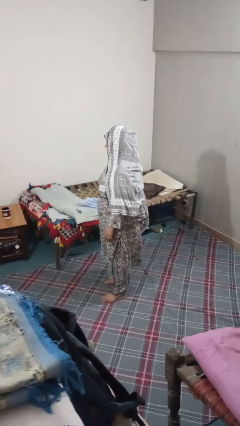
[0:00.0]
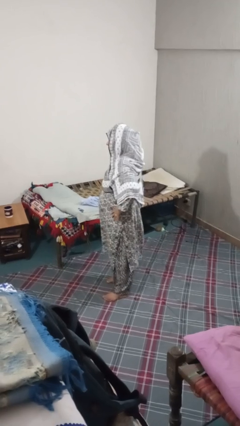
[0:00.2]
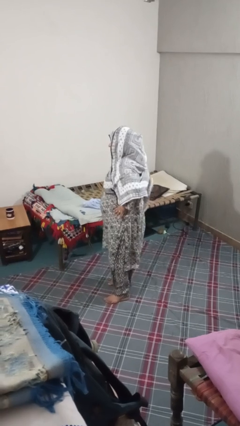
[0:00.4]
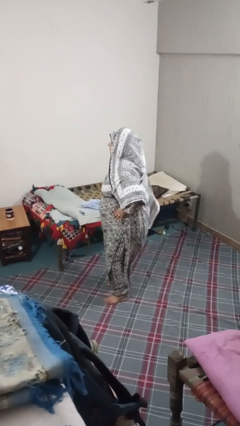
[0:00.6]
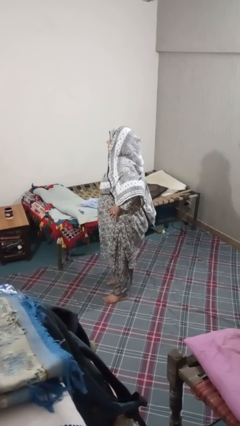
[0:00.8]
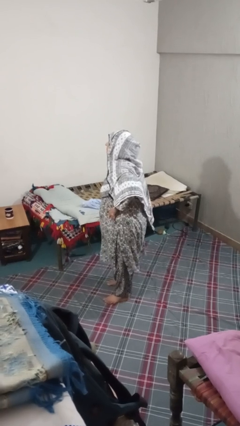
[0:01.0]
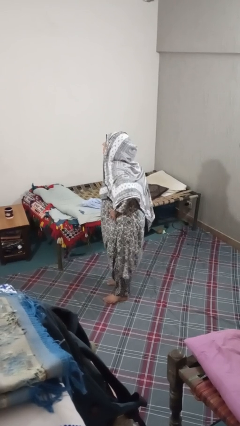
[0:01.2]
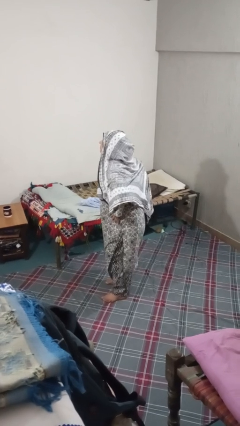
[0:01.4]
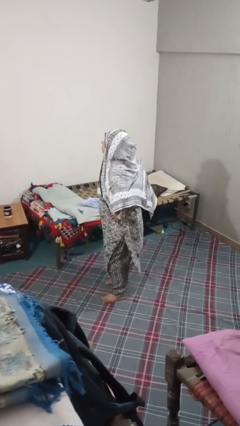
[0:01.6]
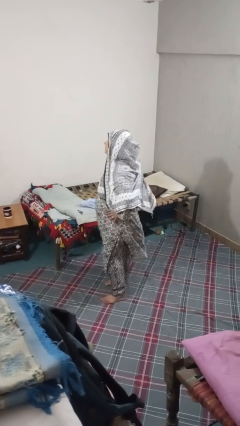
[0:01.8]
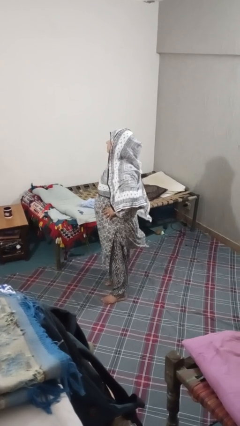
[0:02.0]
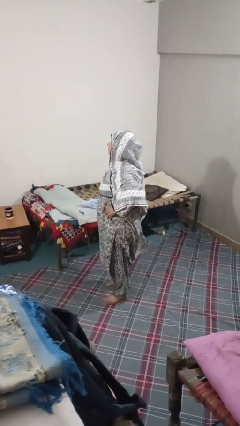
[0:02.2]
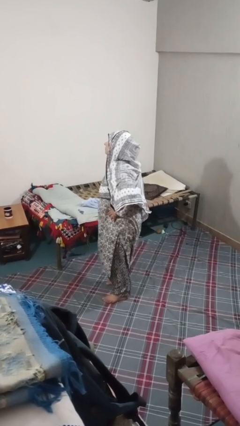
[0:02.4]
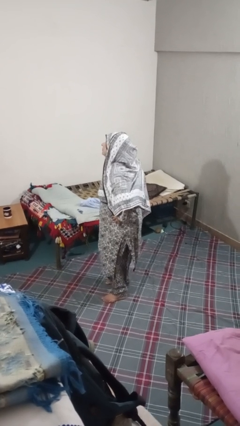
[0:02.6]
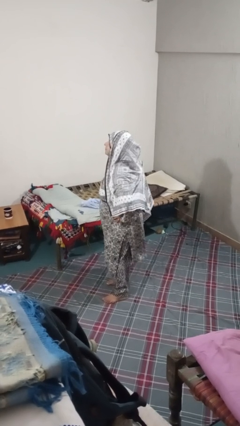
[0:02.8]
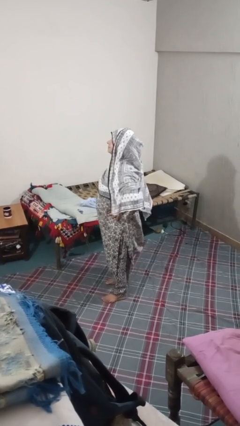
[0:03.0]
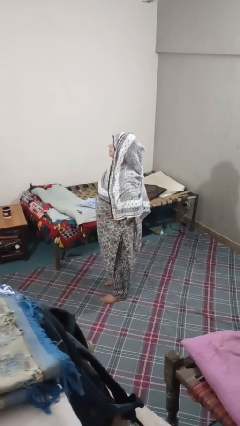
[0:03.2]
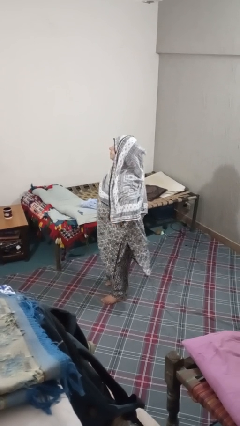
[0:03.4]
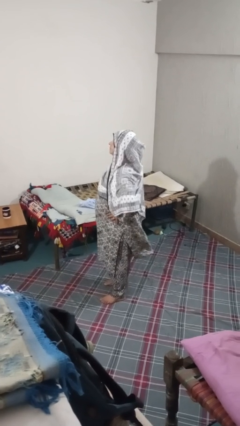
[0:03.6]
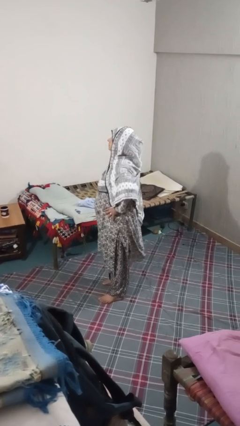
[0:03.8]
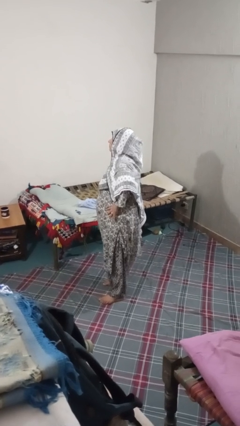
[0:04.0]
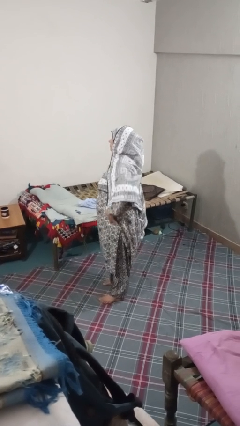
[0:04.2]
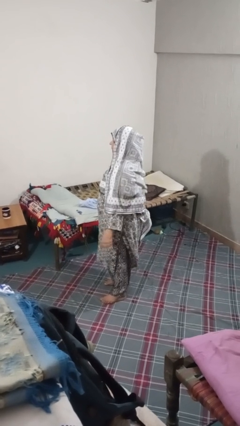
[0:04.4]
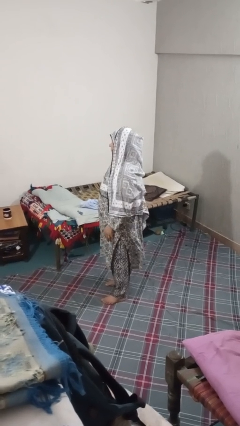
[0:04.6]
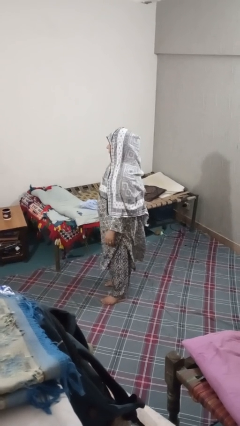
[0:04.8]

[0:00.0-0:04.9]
person wiggles hips

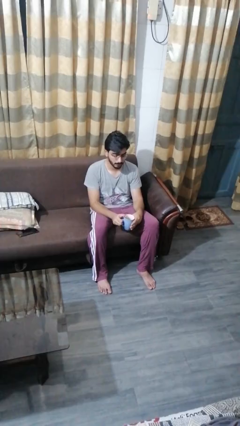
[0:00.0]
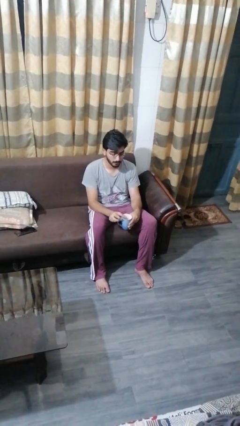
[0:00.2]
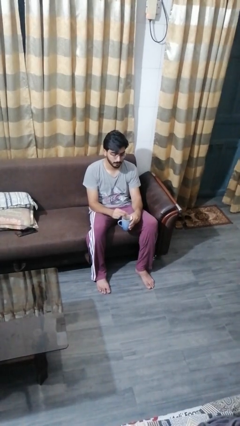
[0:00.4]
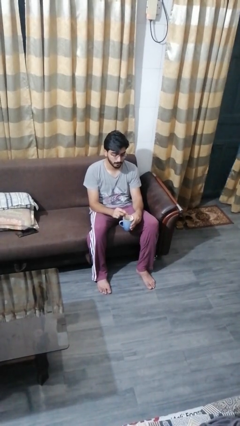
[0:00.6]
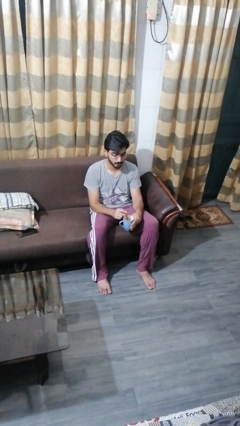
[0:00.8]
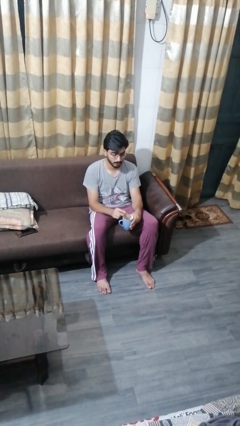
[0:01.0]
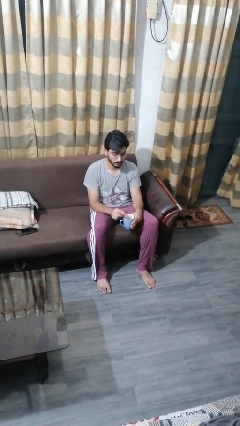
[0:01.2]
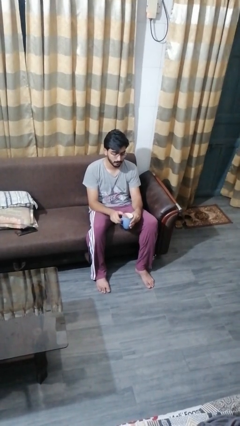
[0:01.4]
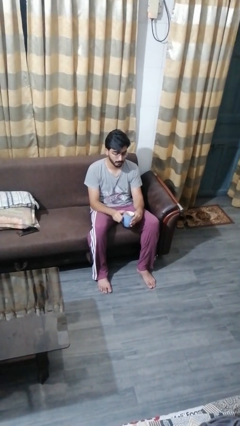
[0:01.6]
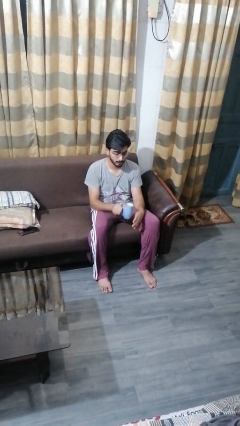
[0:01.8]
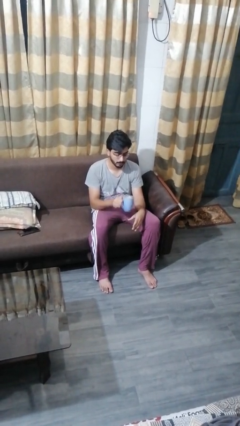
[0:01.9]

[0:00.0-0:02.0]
person stirs mug

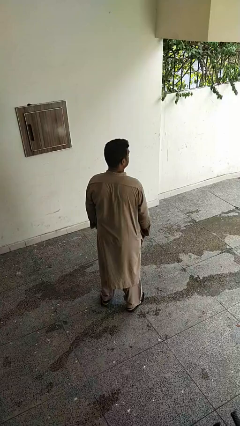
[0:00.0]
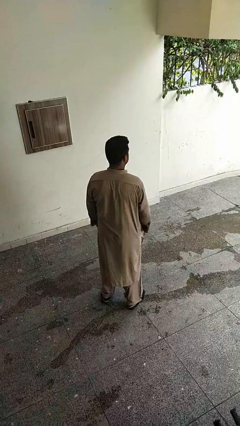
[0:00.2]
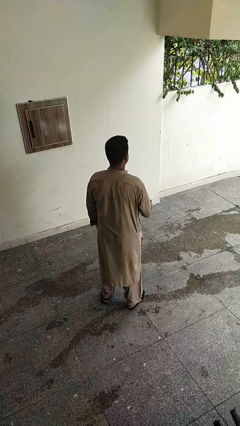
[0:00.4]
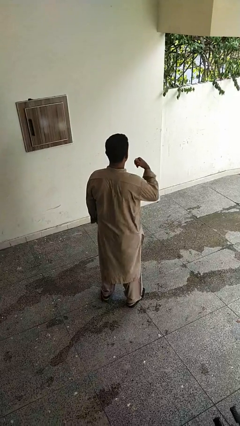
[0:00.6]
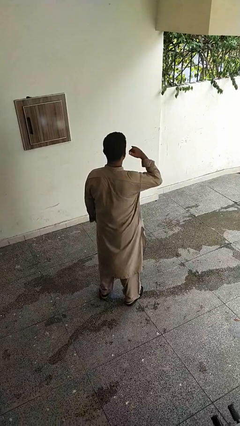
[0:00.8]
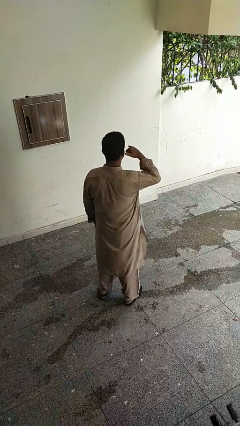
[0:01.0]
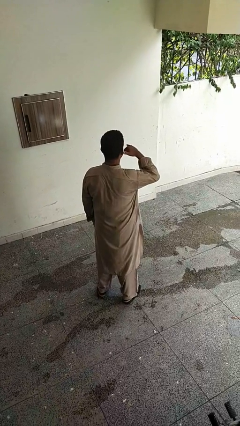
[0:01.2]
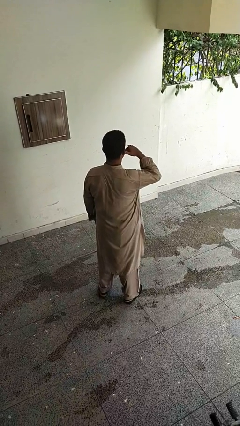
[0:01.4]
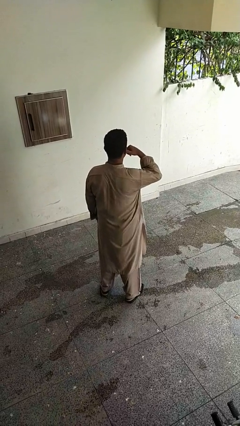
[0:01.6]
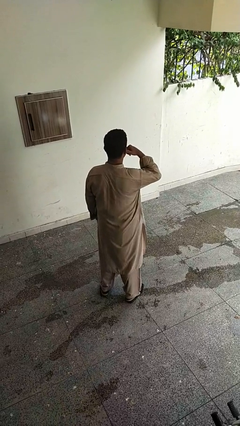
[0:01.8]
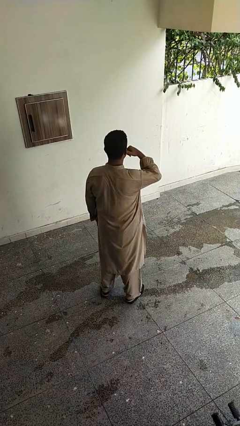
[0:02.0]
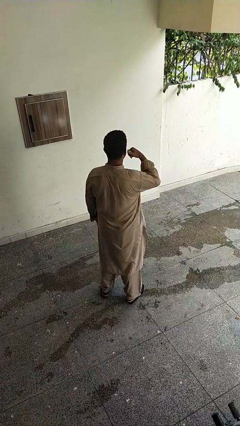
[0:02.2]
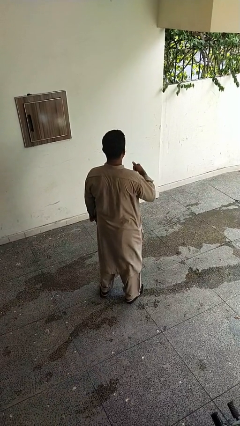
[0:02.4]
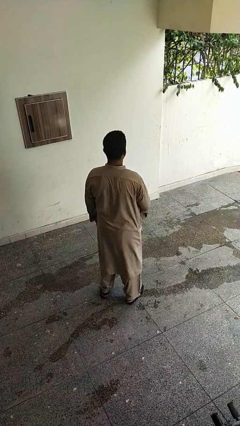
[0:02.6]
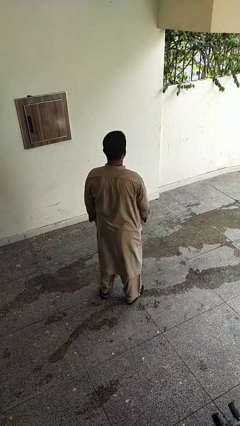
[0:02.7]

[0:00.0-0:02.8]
person gestures call me

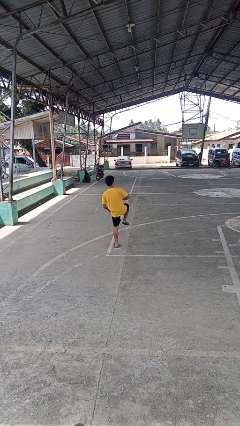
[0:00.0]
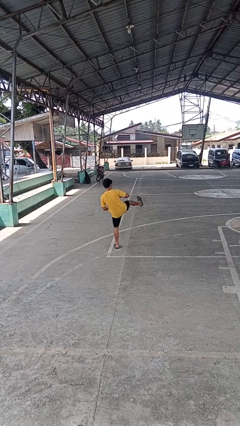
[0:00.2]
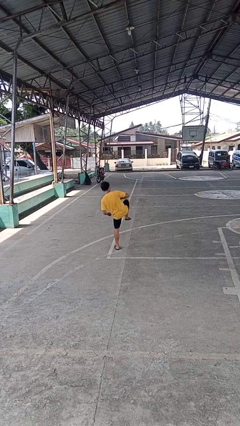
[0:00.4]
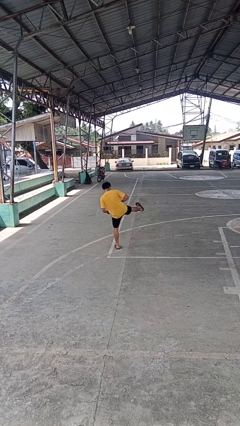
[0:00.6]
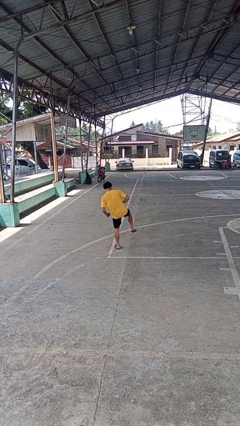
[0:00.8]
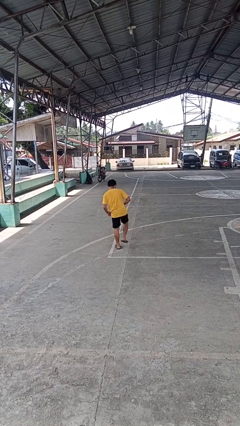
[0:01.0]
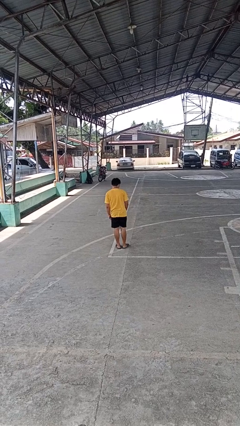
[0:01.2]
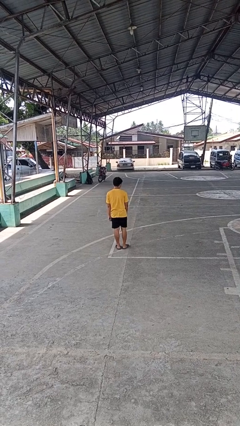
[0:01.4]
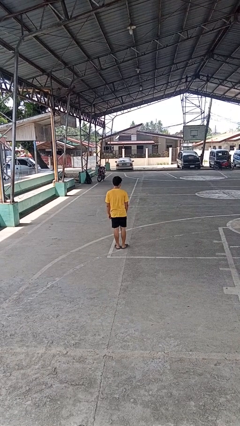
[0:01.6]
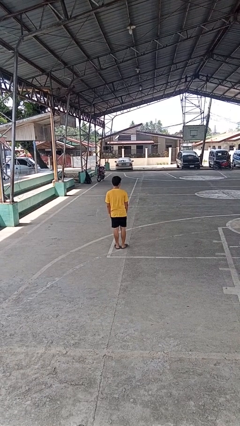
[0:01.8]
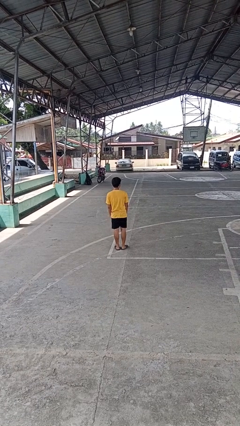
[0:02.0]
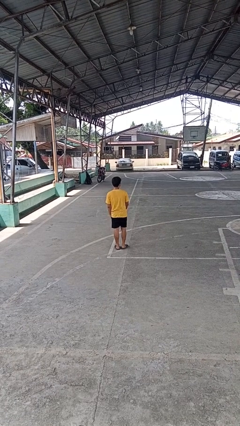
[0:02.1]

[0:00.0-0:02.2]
person karate kicks

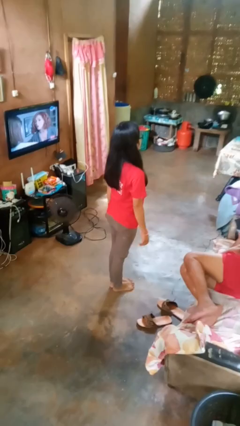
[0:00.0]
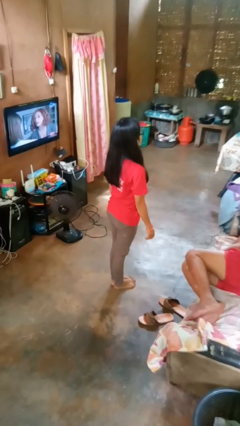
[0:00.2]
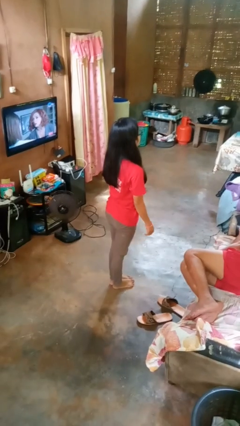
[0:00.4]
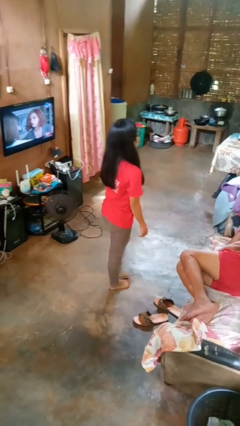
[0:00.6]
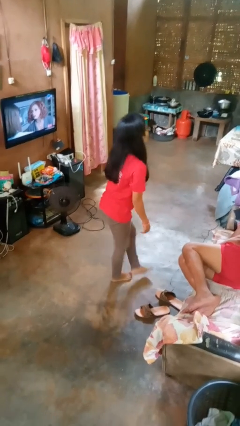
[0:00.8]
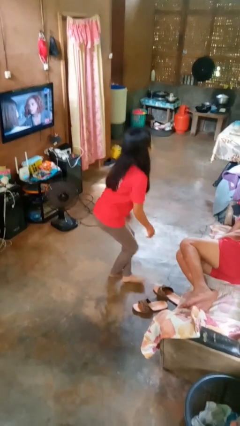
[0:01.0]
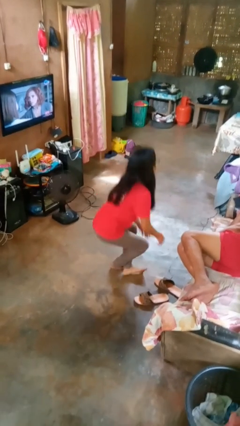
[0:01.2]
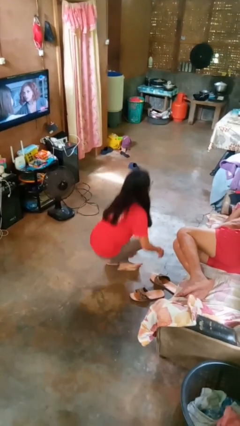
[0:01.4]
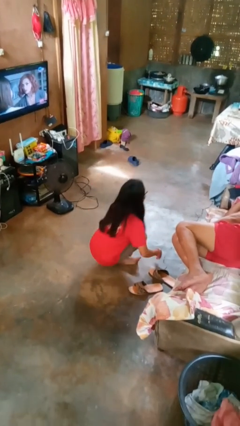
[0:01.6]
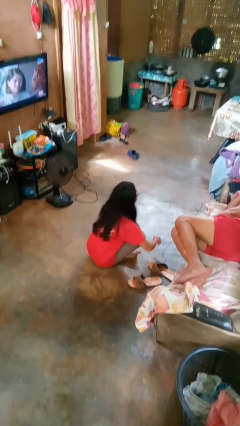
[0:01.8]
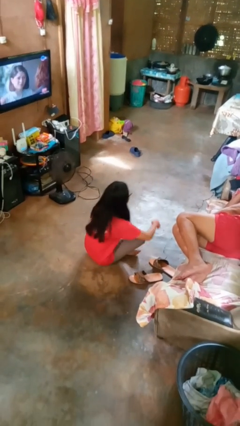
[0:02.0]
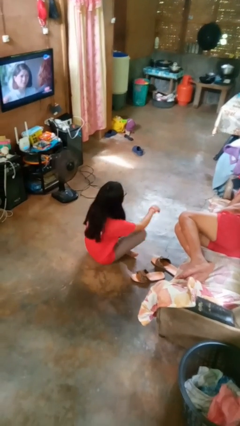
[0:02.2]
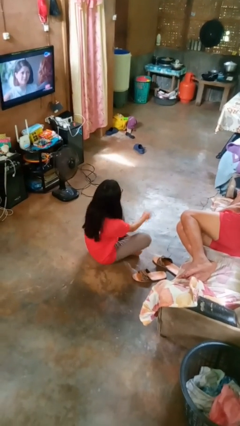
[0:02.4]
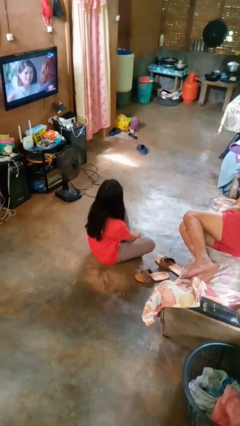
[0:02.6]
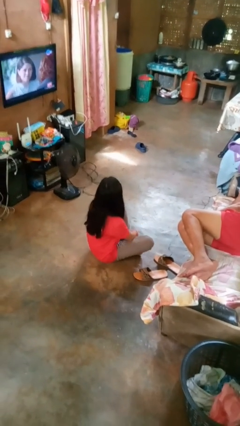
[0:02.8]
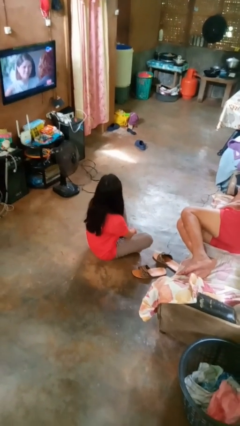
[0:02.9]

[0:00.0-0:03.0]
person sits crisscross

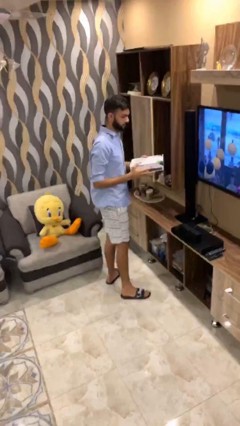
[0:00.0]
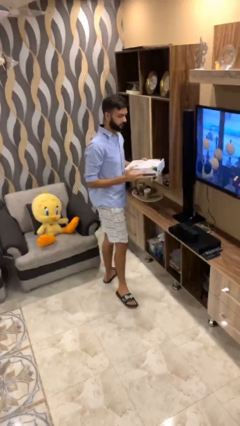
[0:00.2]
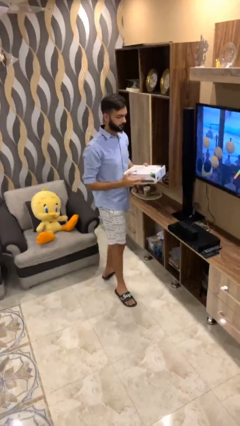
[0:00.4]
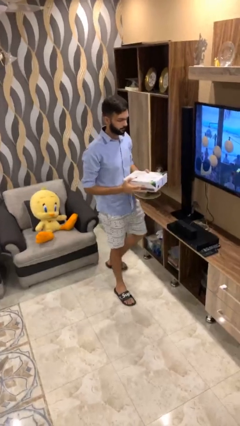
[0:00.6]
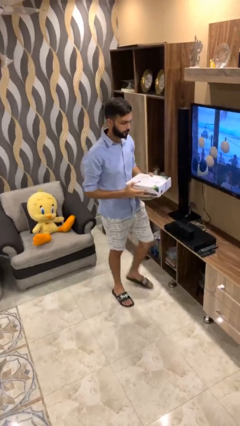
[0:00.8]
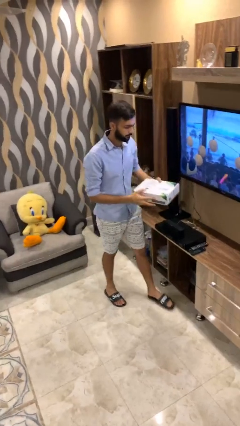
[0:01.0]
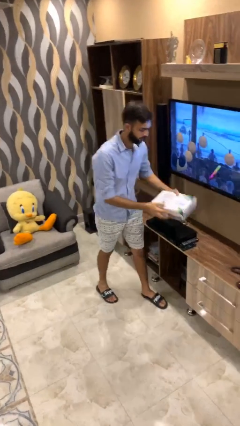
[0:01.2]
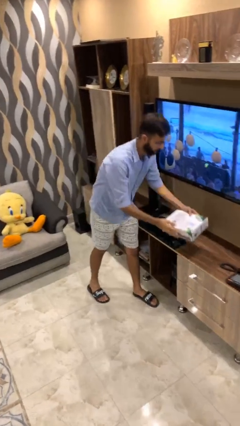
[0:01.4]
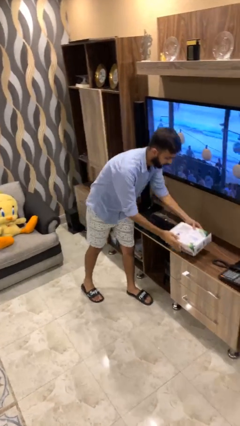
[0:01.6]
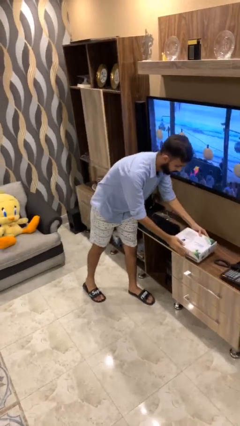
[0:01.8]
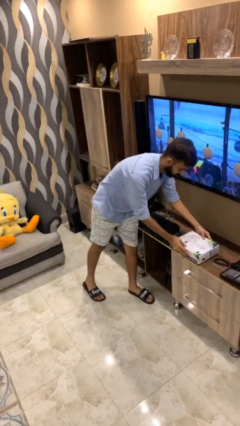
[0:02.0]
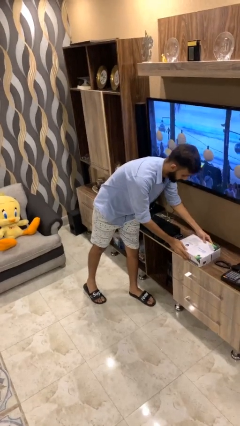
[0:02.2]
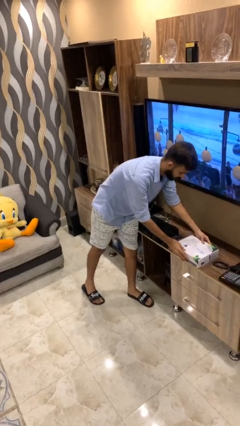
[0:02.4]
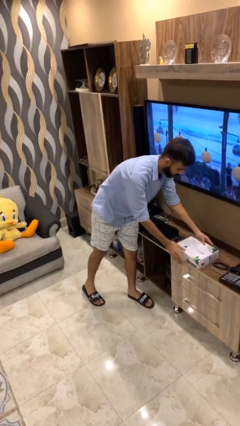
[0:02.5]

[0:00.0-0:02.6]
person puts down object on table

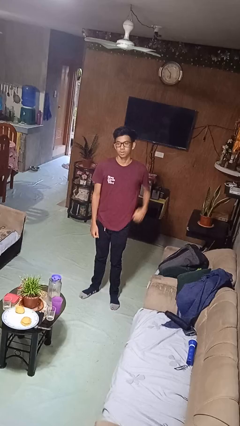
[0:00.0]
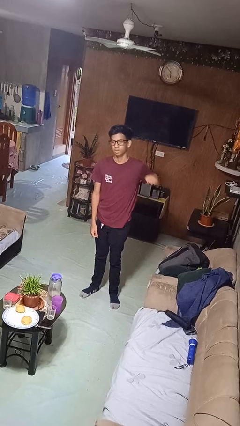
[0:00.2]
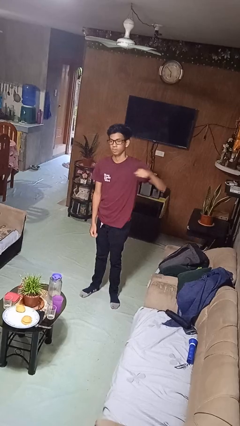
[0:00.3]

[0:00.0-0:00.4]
person punches
